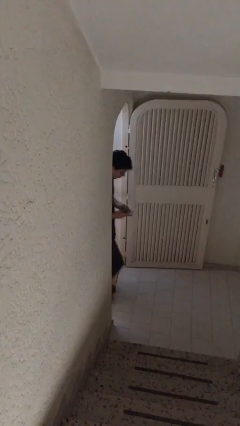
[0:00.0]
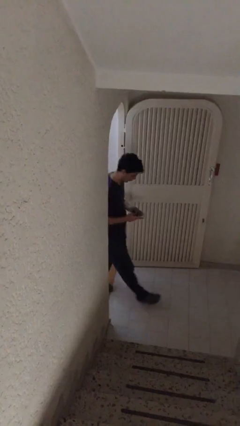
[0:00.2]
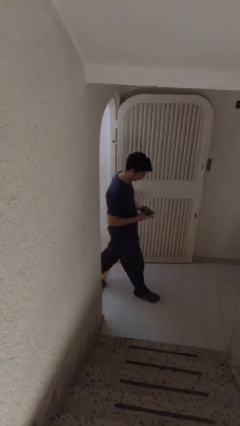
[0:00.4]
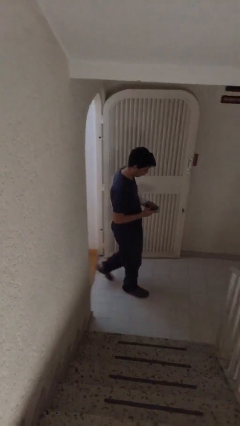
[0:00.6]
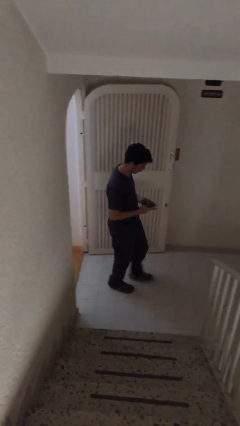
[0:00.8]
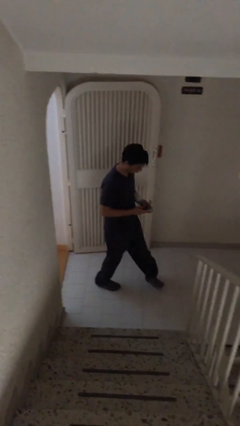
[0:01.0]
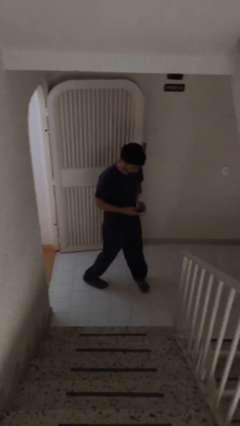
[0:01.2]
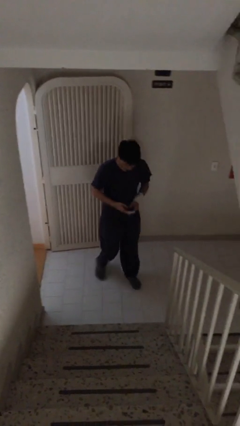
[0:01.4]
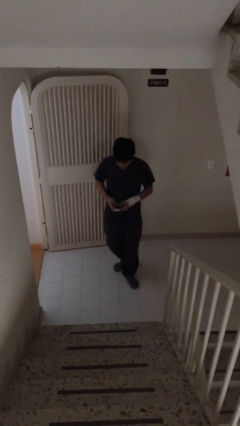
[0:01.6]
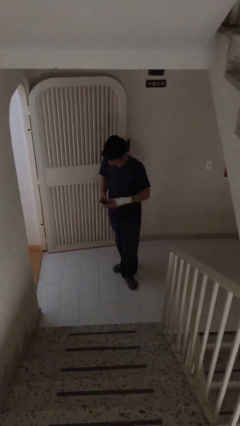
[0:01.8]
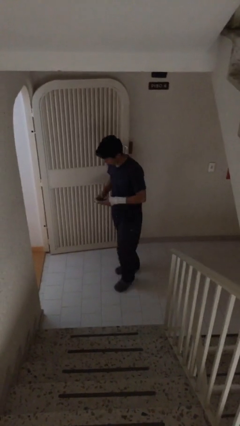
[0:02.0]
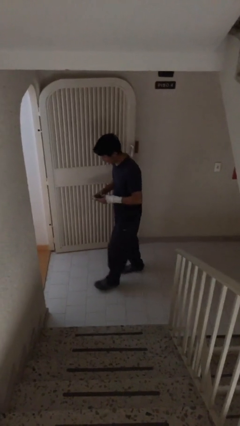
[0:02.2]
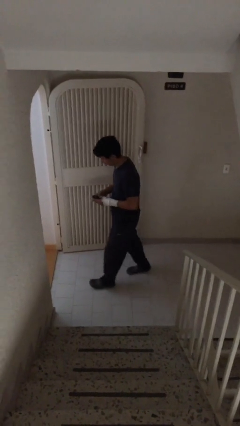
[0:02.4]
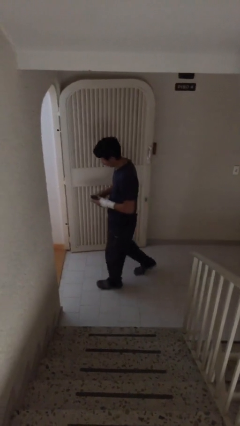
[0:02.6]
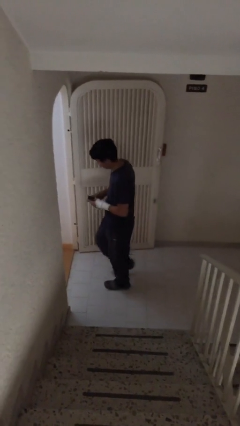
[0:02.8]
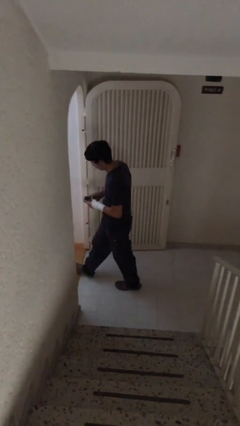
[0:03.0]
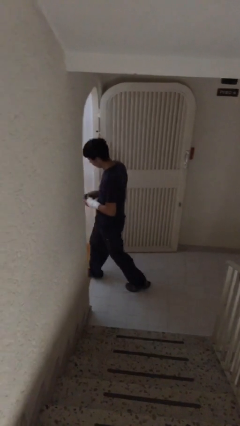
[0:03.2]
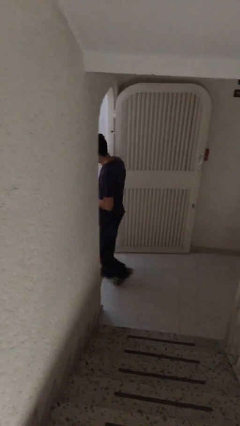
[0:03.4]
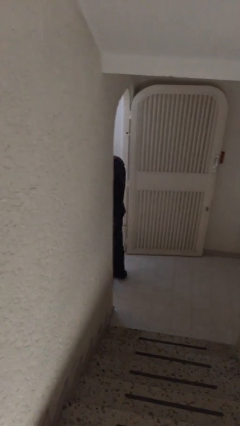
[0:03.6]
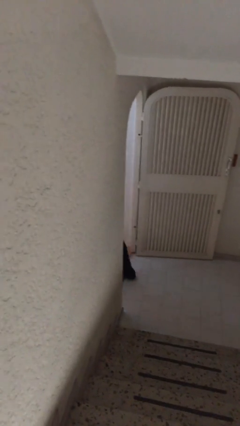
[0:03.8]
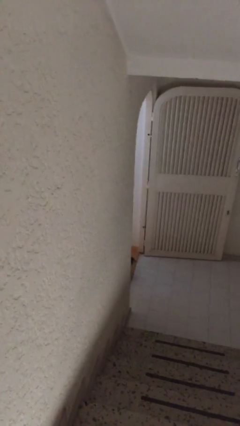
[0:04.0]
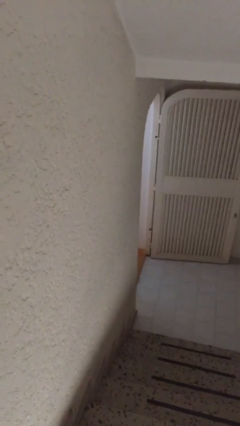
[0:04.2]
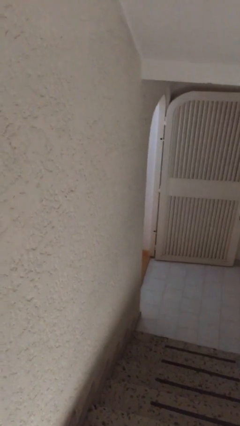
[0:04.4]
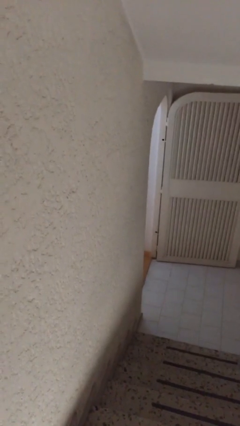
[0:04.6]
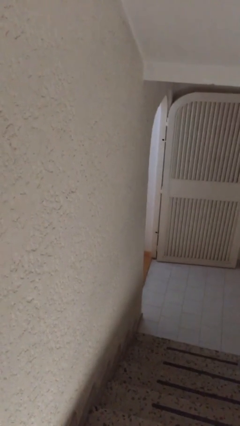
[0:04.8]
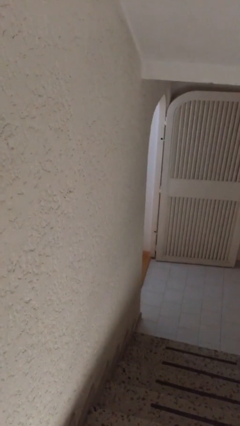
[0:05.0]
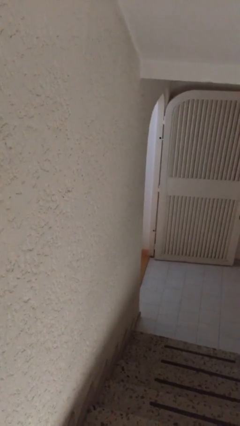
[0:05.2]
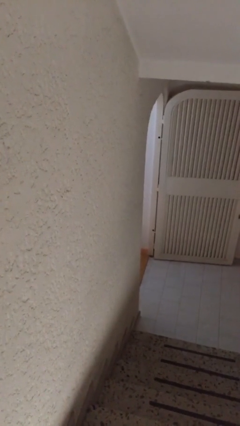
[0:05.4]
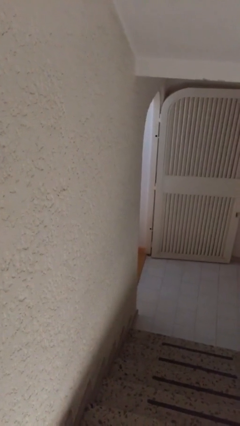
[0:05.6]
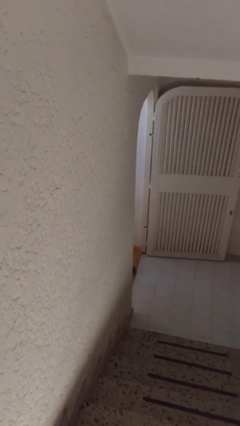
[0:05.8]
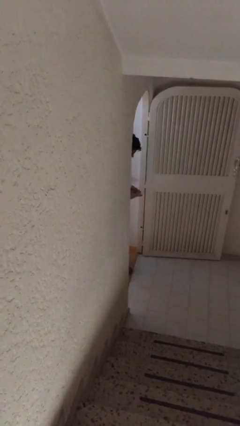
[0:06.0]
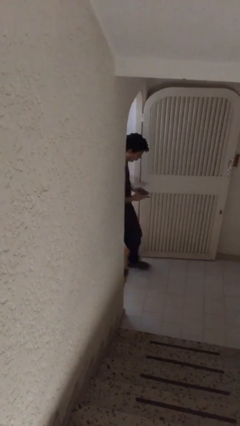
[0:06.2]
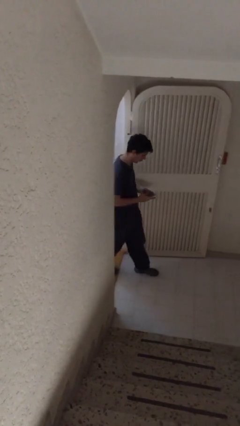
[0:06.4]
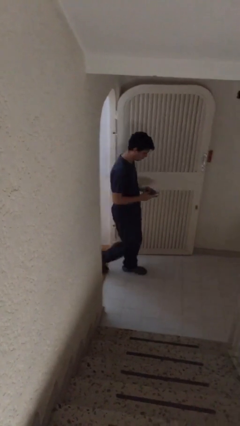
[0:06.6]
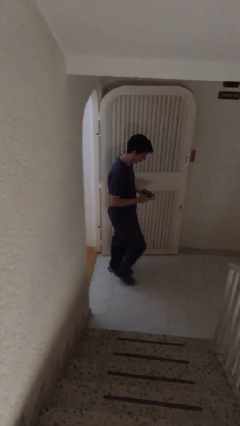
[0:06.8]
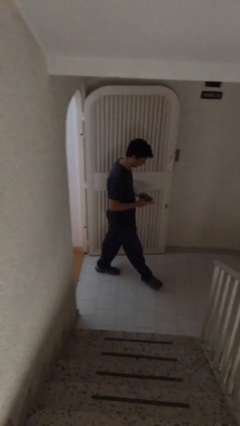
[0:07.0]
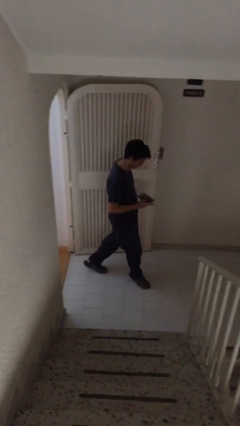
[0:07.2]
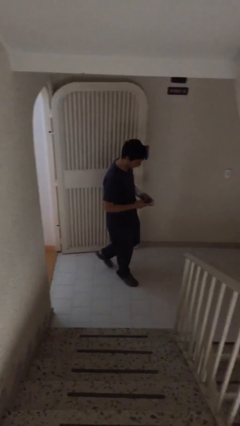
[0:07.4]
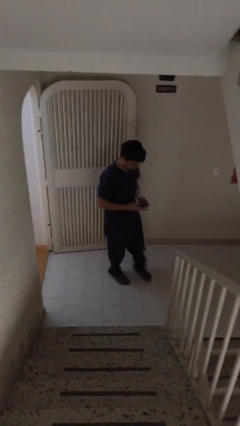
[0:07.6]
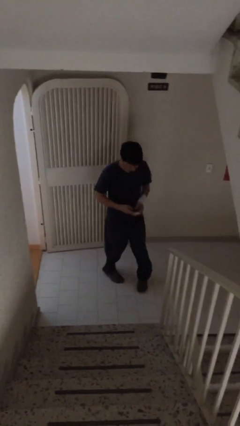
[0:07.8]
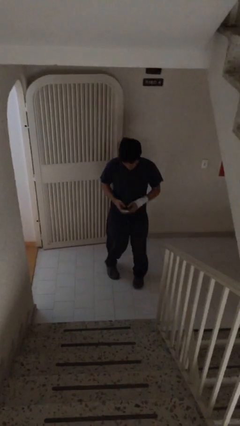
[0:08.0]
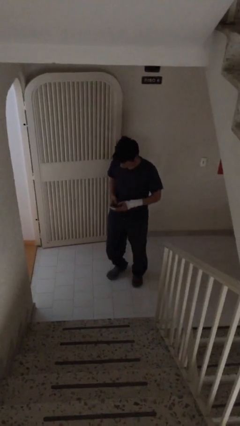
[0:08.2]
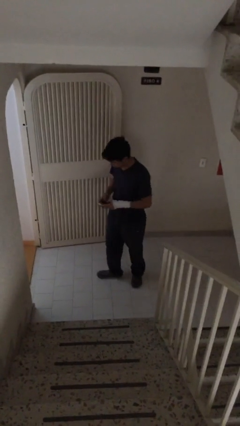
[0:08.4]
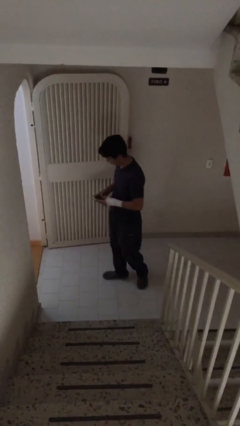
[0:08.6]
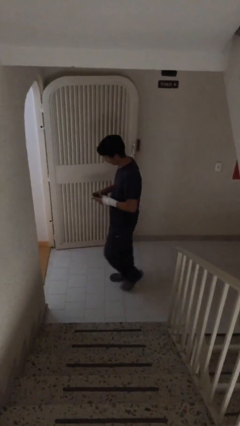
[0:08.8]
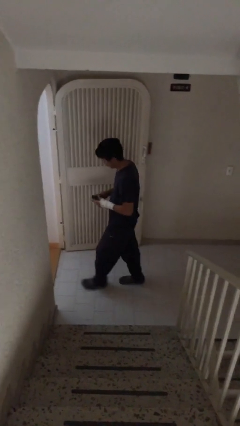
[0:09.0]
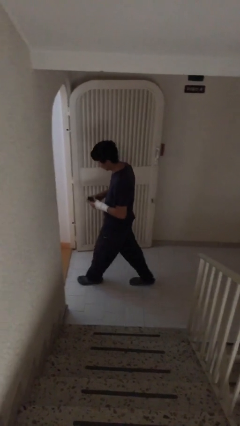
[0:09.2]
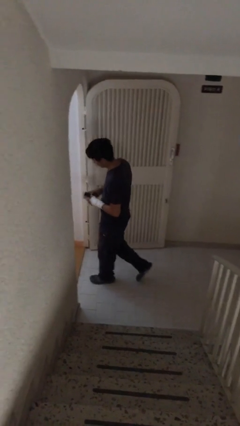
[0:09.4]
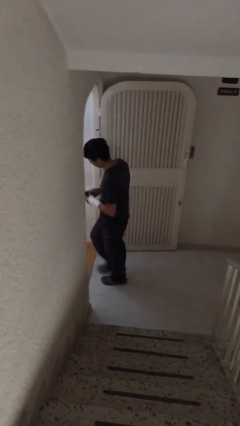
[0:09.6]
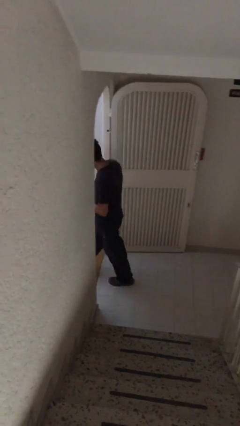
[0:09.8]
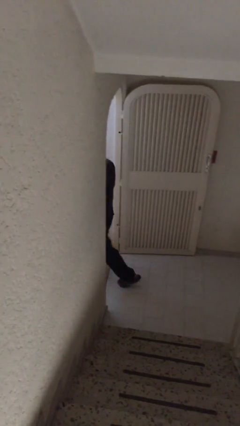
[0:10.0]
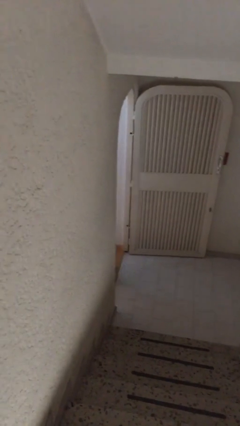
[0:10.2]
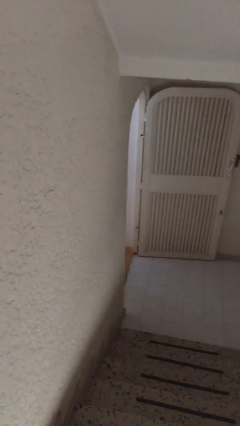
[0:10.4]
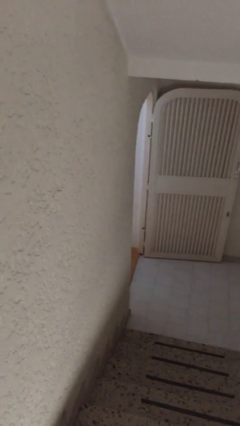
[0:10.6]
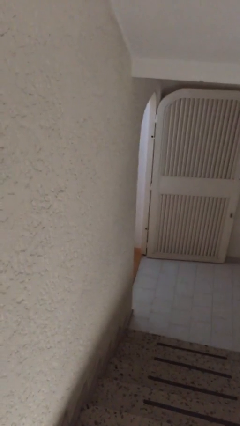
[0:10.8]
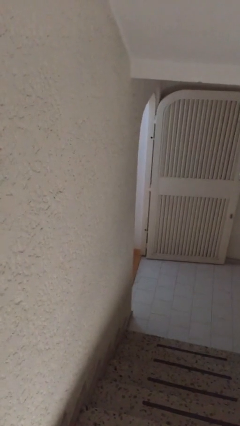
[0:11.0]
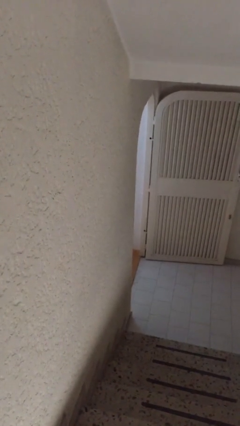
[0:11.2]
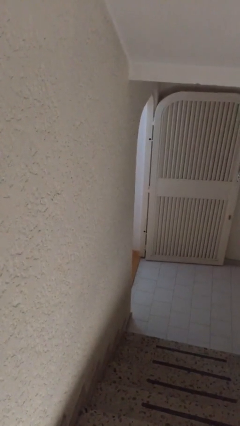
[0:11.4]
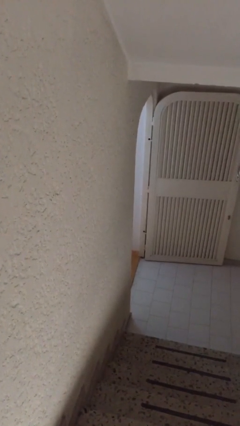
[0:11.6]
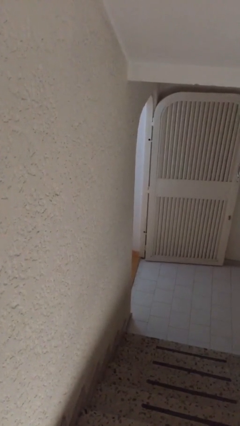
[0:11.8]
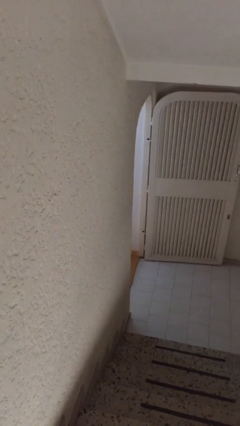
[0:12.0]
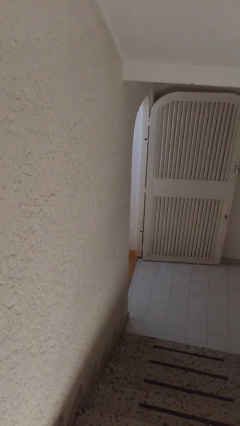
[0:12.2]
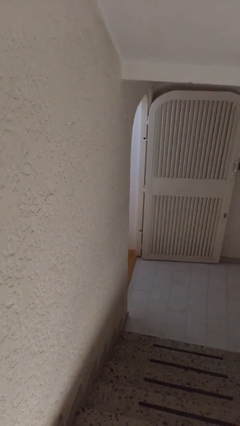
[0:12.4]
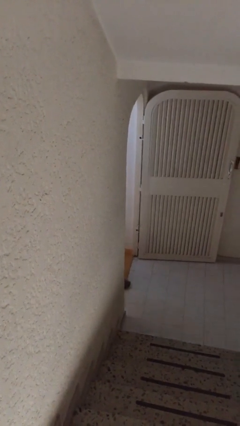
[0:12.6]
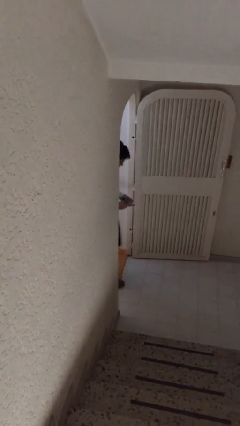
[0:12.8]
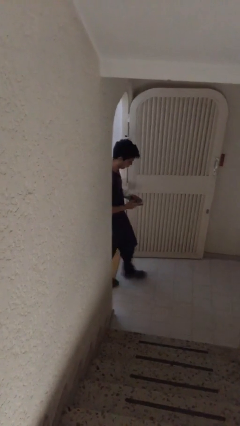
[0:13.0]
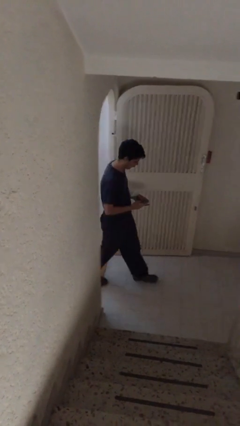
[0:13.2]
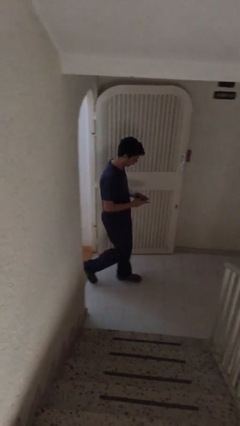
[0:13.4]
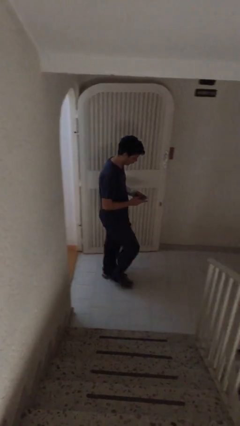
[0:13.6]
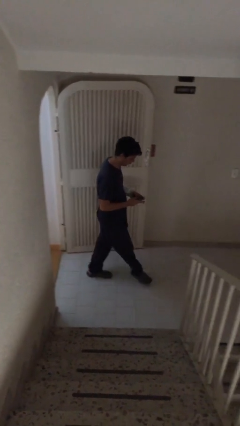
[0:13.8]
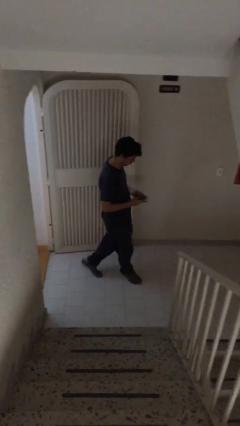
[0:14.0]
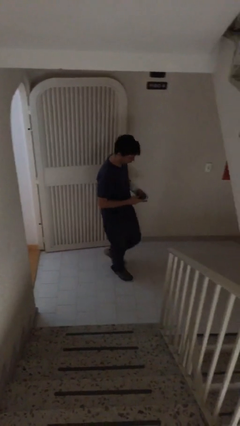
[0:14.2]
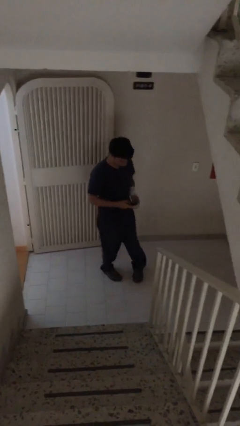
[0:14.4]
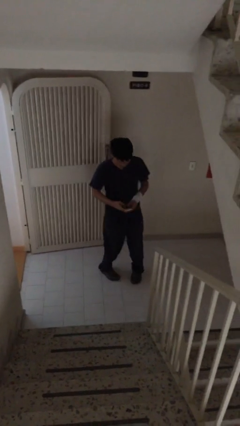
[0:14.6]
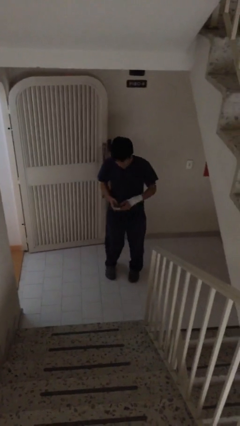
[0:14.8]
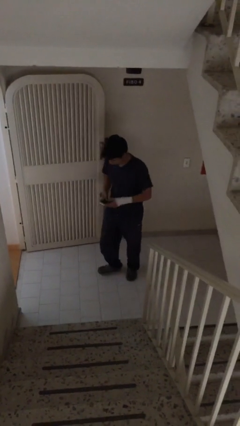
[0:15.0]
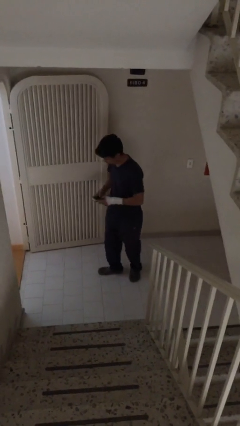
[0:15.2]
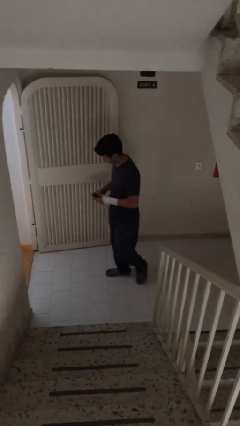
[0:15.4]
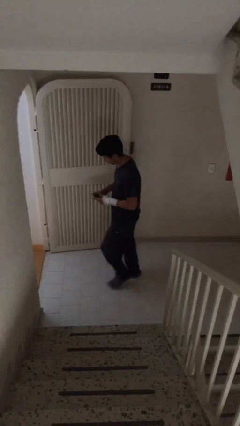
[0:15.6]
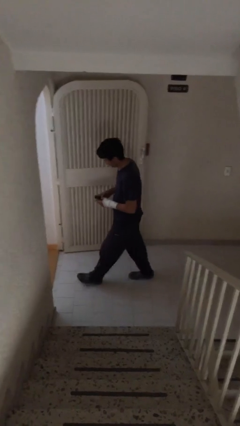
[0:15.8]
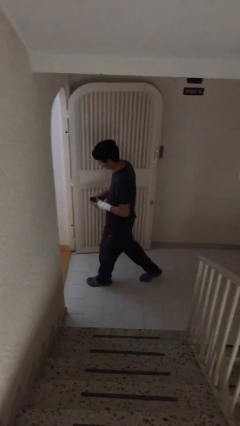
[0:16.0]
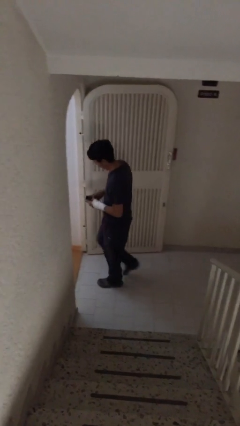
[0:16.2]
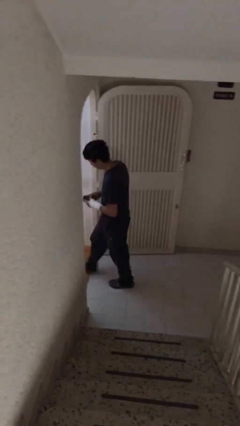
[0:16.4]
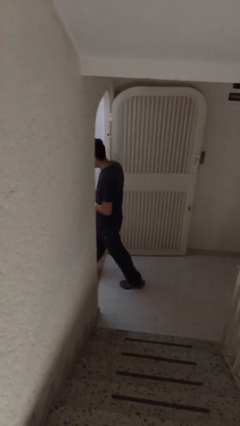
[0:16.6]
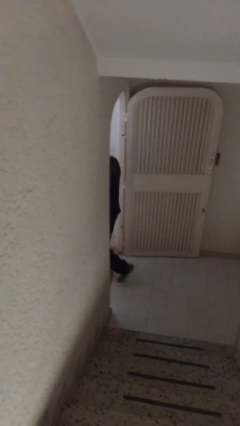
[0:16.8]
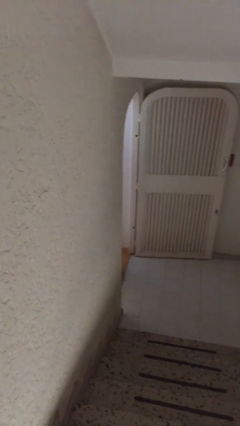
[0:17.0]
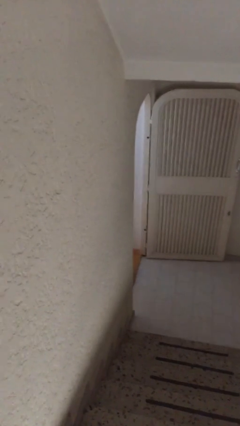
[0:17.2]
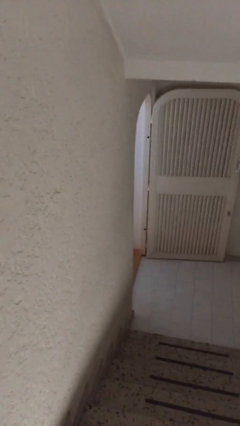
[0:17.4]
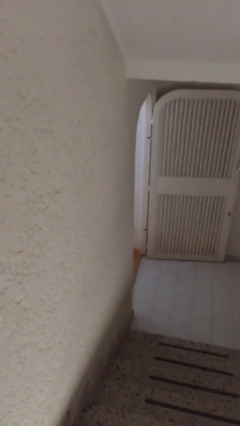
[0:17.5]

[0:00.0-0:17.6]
person texts on phone

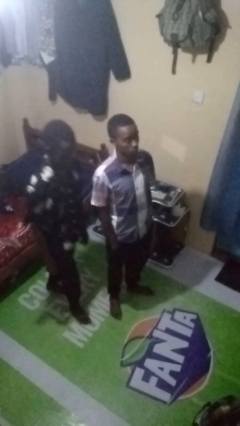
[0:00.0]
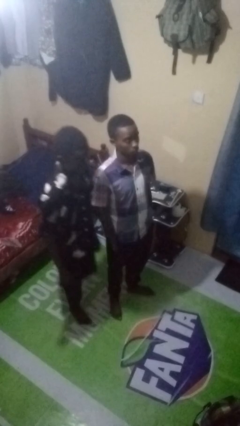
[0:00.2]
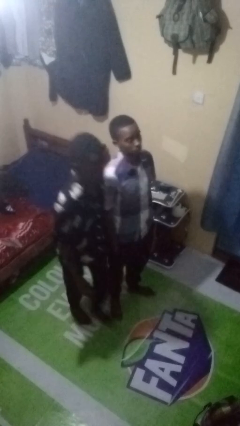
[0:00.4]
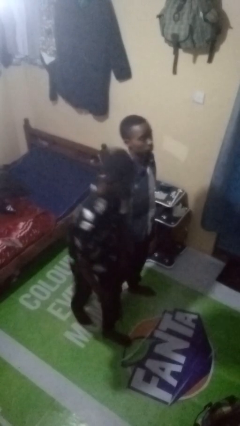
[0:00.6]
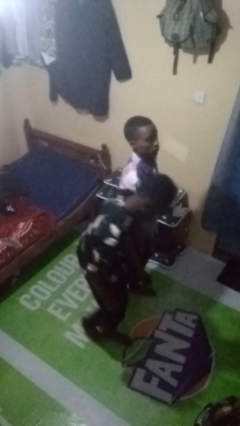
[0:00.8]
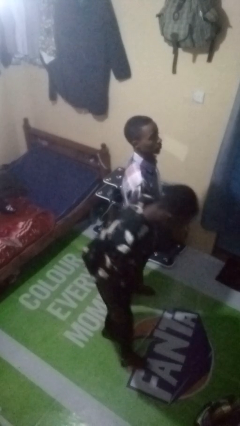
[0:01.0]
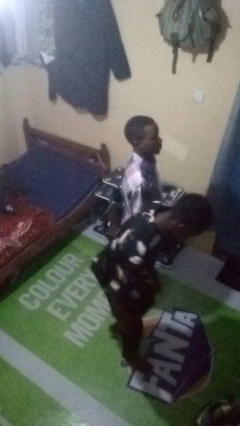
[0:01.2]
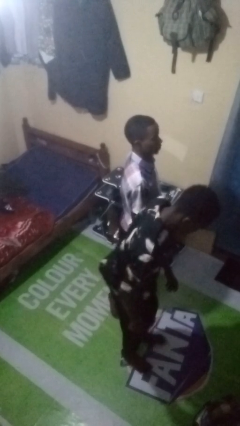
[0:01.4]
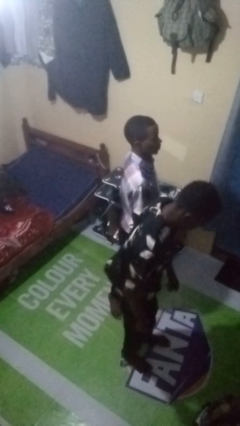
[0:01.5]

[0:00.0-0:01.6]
person bumps into person
